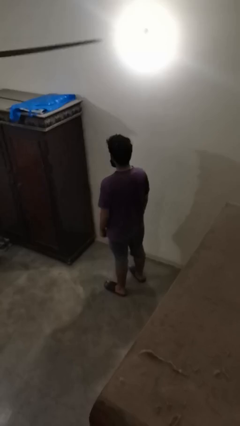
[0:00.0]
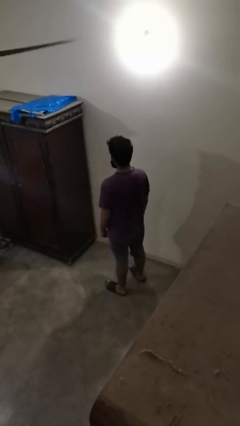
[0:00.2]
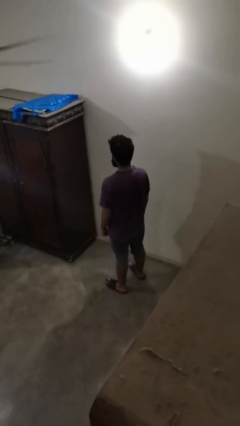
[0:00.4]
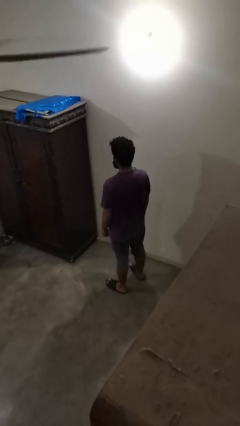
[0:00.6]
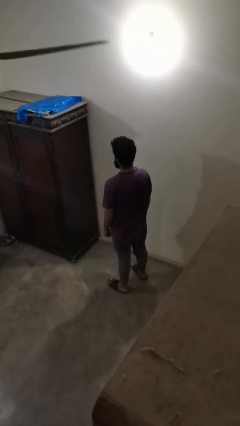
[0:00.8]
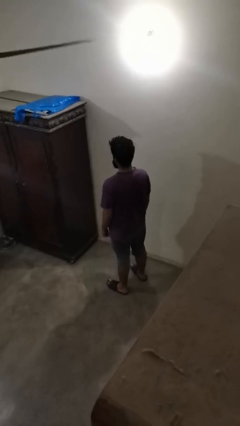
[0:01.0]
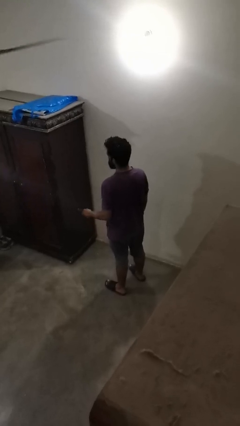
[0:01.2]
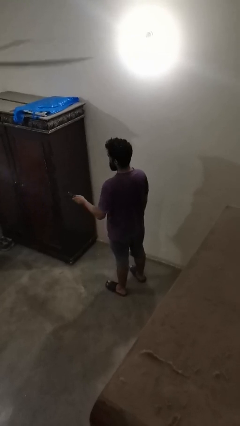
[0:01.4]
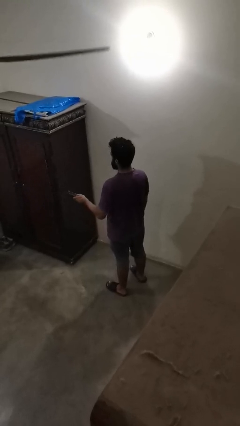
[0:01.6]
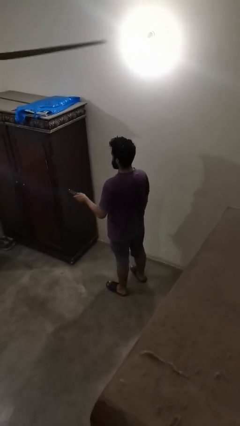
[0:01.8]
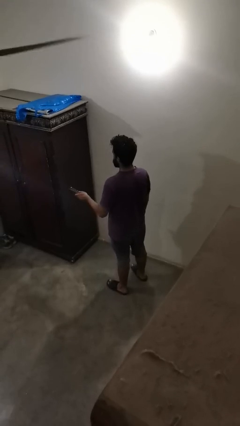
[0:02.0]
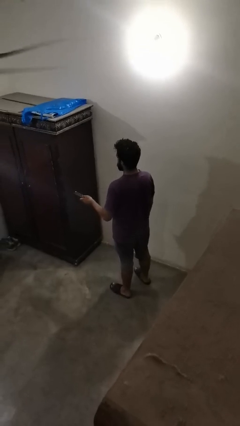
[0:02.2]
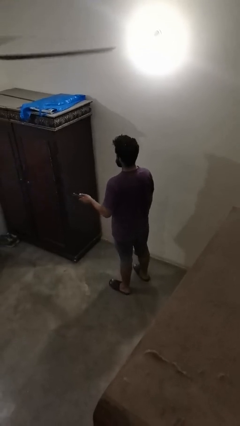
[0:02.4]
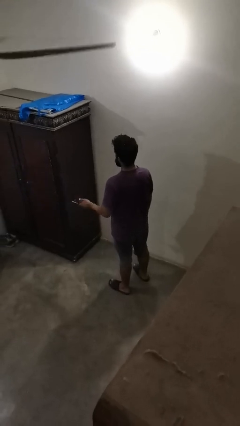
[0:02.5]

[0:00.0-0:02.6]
person uses television remote

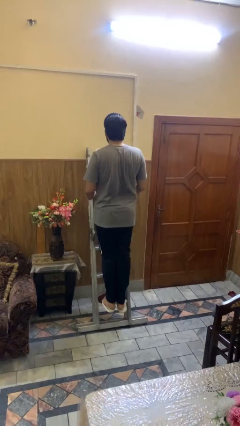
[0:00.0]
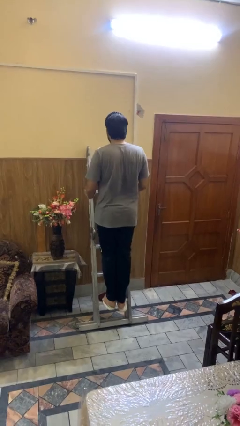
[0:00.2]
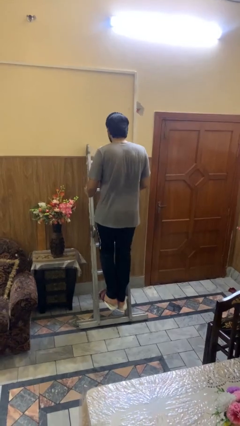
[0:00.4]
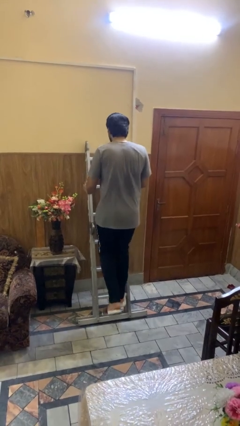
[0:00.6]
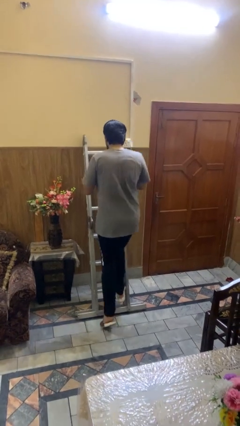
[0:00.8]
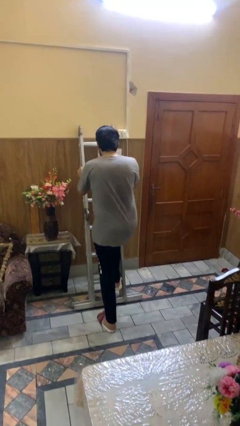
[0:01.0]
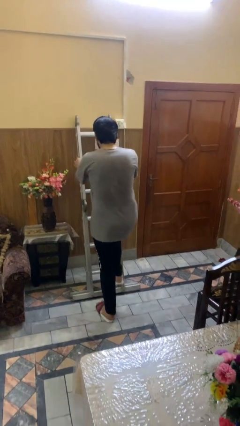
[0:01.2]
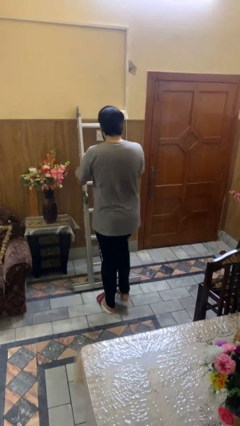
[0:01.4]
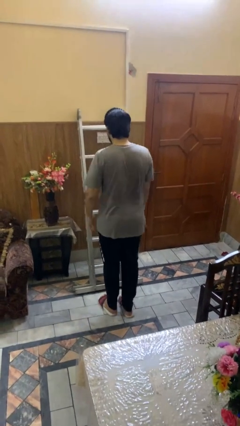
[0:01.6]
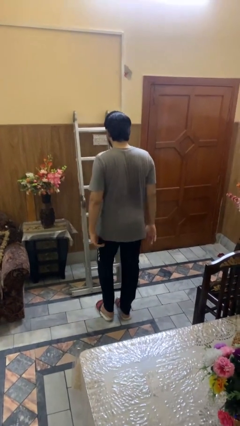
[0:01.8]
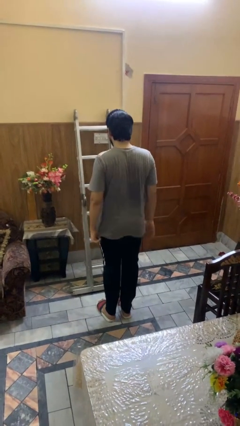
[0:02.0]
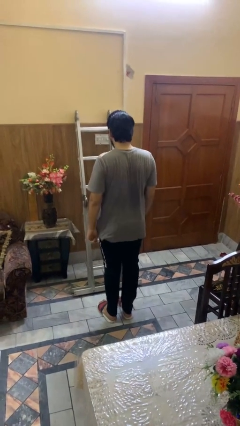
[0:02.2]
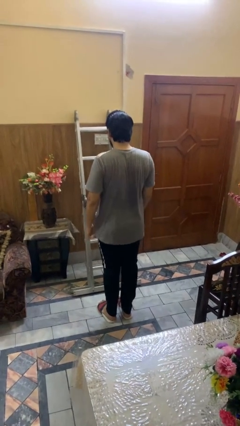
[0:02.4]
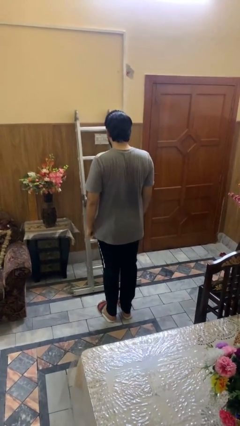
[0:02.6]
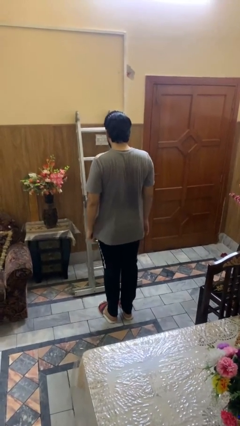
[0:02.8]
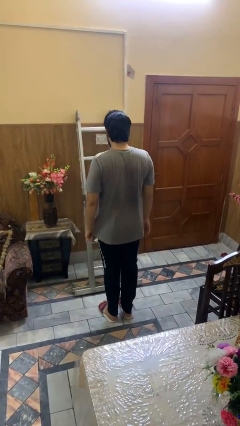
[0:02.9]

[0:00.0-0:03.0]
person climbs down ladder

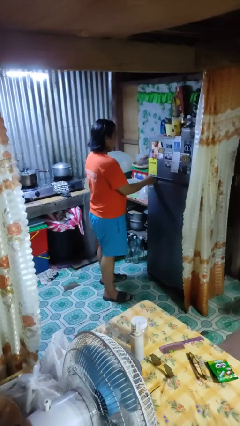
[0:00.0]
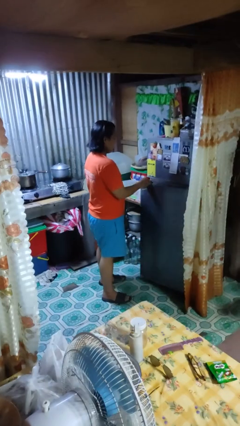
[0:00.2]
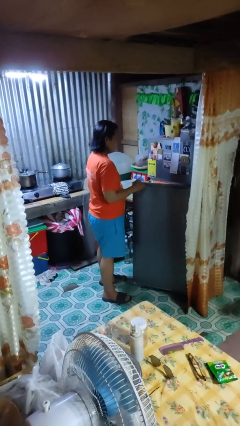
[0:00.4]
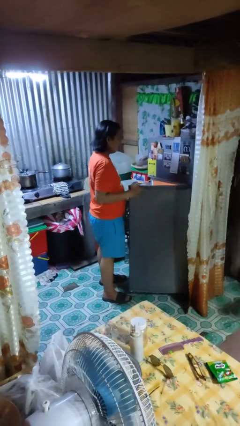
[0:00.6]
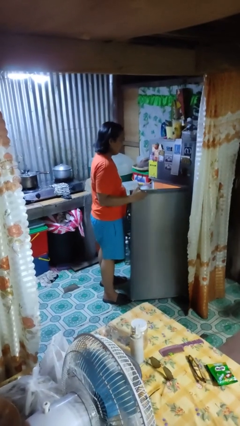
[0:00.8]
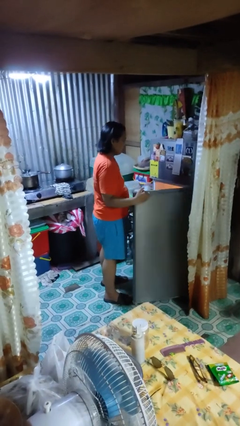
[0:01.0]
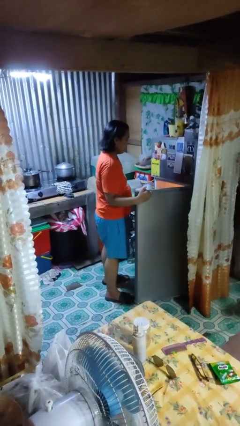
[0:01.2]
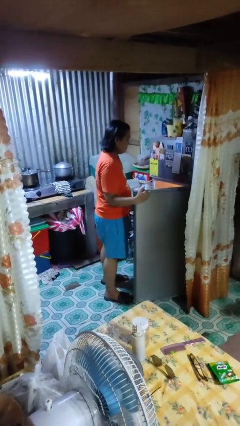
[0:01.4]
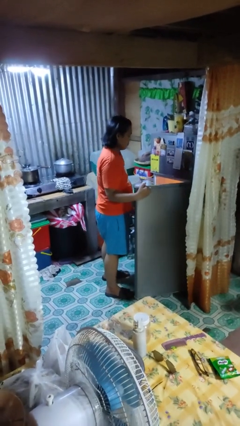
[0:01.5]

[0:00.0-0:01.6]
person opens refrigerator

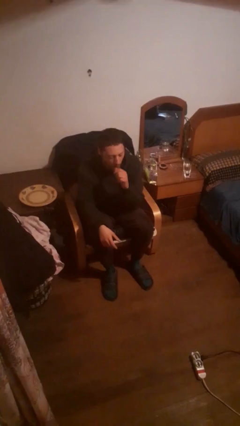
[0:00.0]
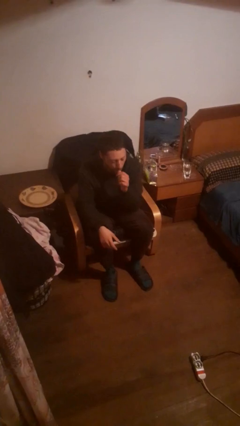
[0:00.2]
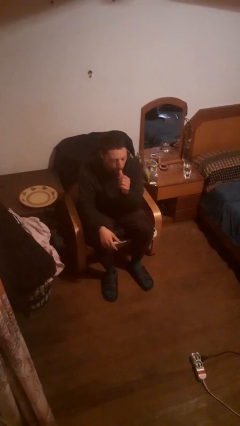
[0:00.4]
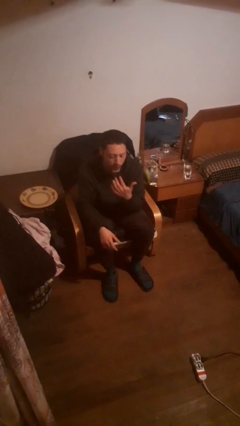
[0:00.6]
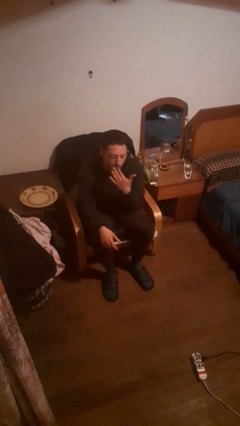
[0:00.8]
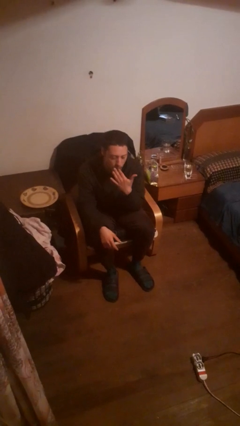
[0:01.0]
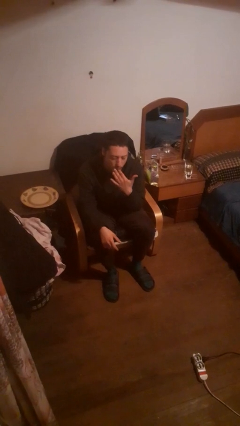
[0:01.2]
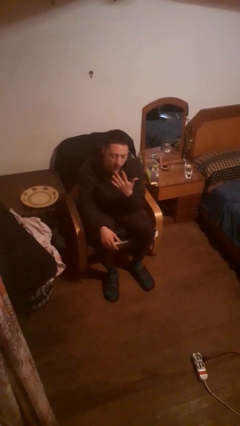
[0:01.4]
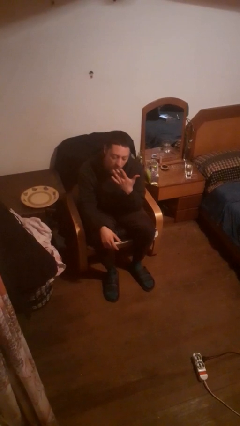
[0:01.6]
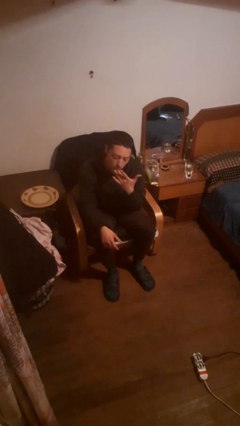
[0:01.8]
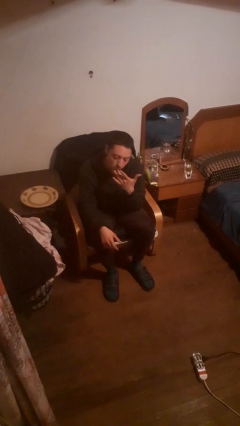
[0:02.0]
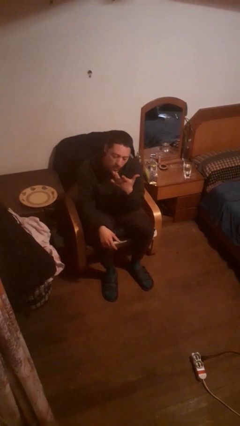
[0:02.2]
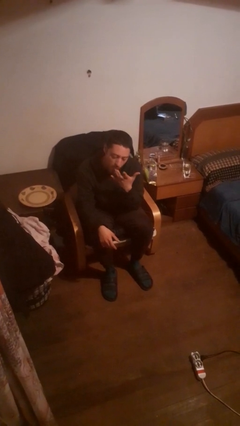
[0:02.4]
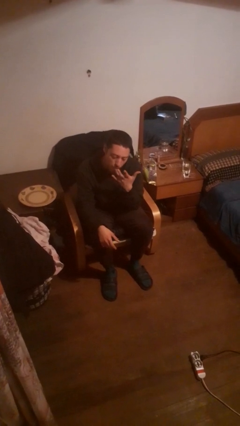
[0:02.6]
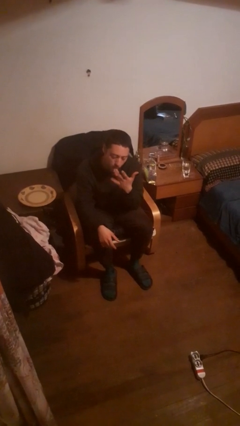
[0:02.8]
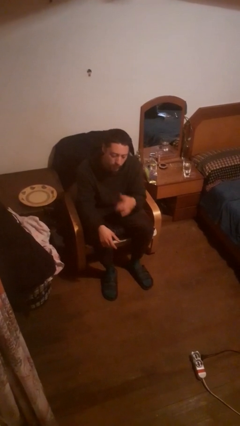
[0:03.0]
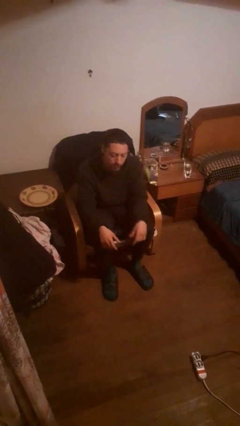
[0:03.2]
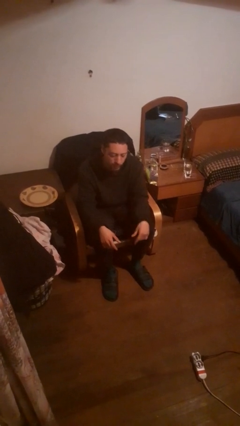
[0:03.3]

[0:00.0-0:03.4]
person licks fingers

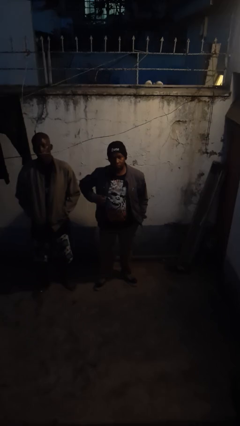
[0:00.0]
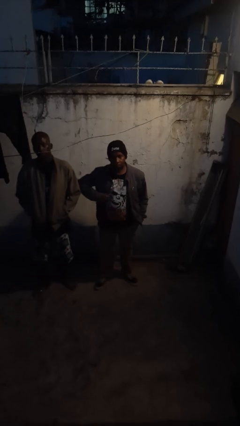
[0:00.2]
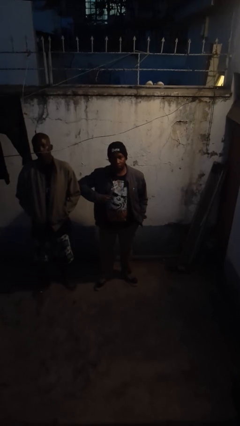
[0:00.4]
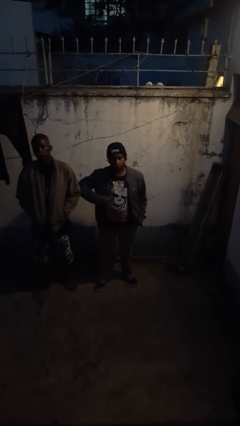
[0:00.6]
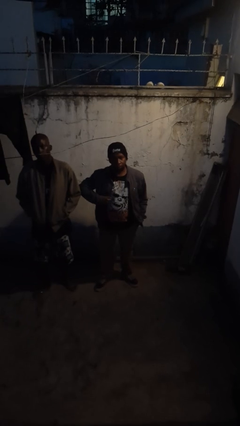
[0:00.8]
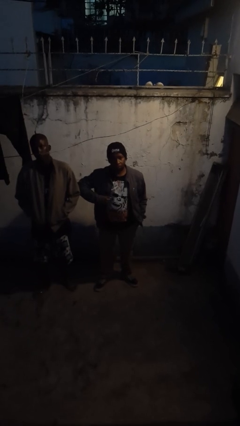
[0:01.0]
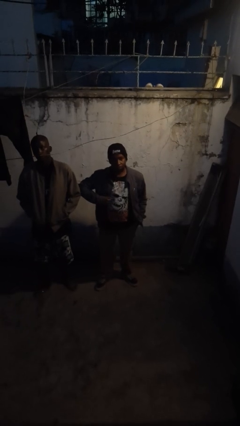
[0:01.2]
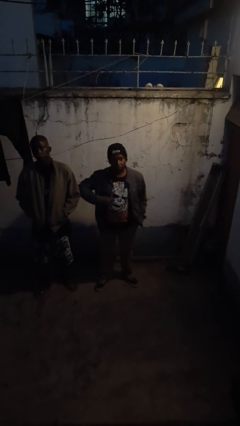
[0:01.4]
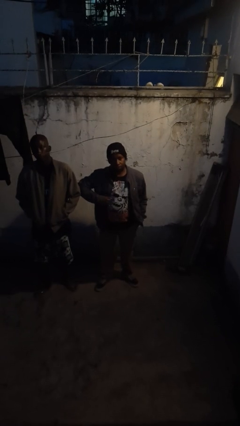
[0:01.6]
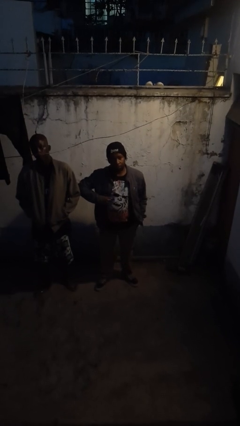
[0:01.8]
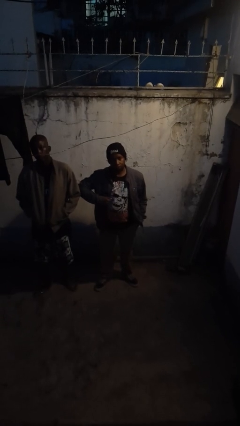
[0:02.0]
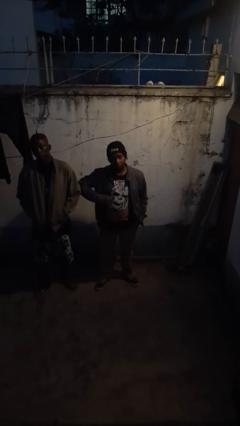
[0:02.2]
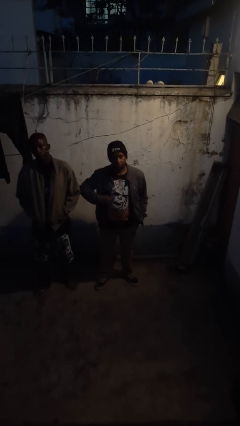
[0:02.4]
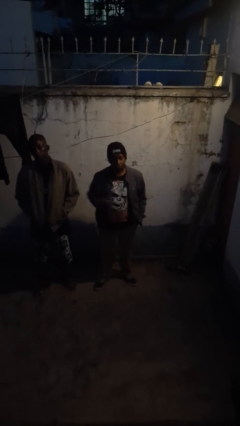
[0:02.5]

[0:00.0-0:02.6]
person nudges person with elbow

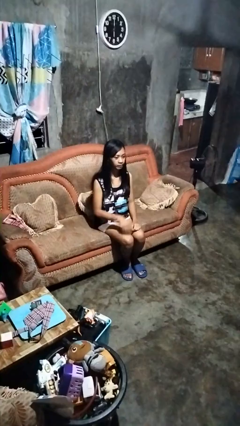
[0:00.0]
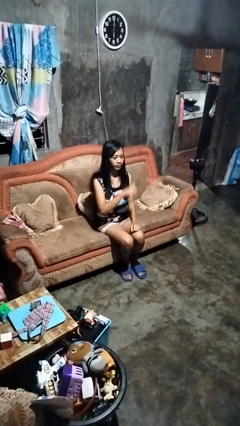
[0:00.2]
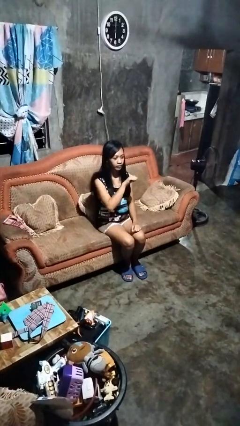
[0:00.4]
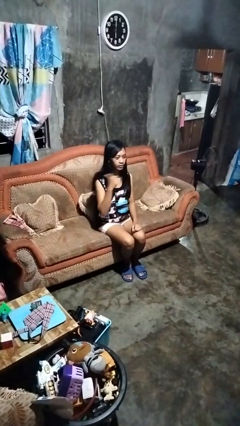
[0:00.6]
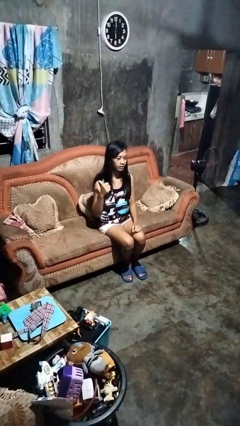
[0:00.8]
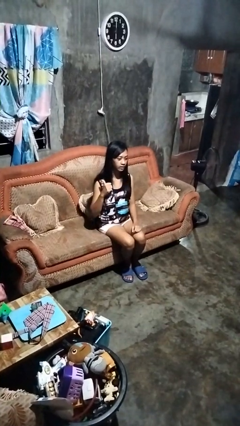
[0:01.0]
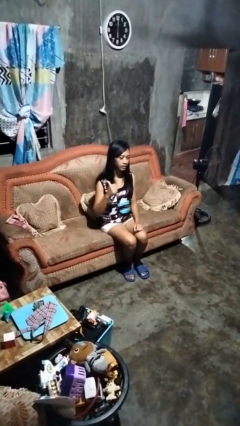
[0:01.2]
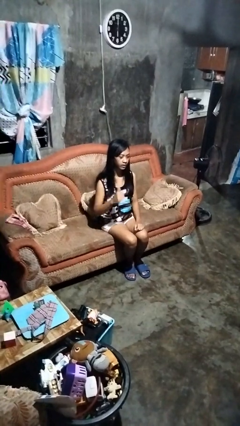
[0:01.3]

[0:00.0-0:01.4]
person gestures cut

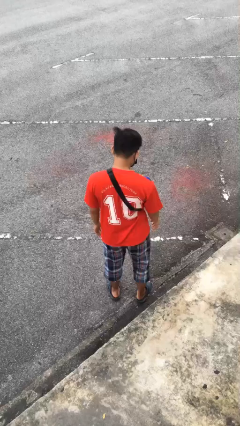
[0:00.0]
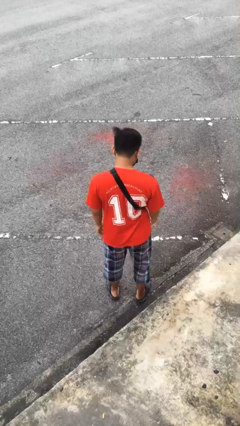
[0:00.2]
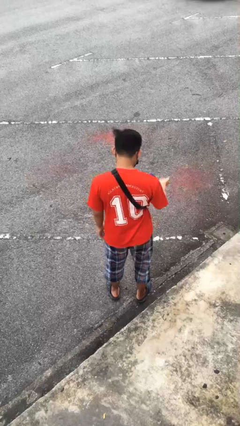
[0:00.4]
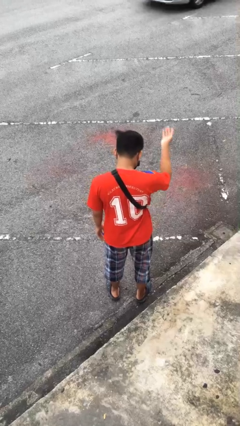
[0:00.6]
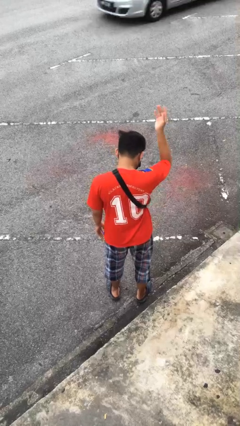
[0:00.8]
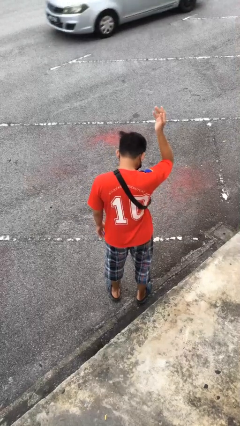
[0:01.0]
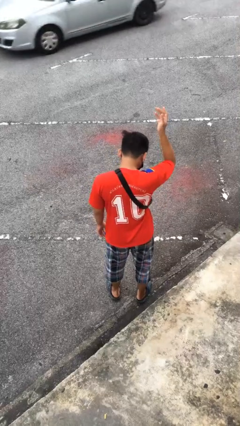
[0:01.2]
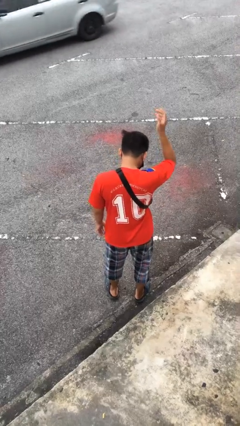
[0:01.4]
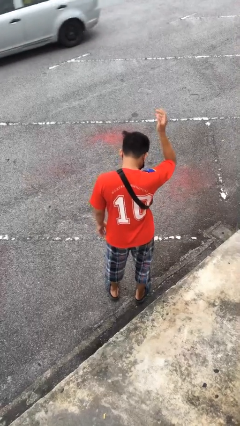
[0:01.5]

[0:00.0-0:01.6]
person gestures swipe up

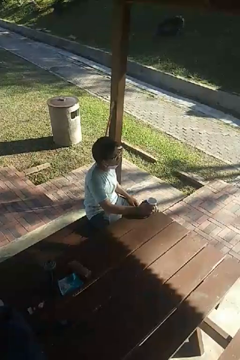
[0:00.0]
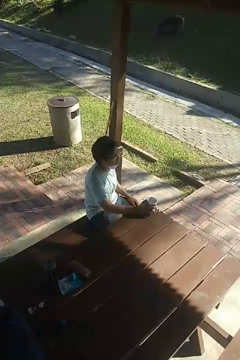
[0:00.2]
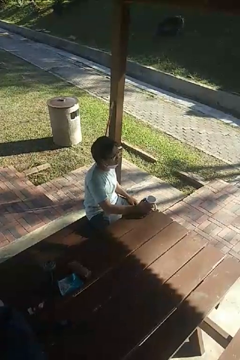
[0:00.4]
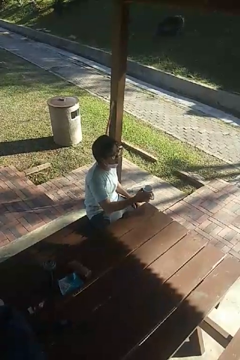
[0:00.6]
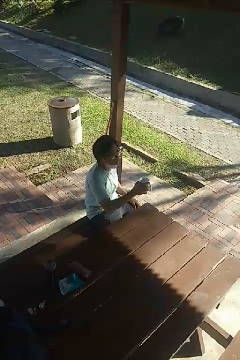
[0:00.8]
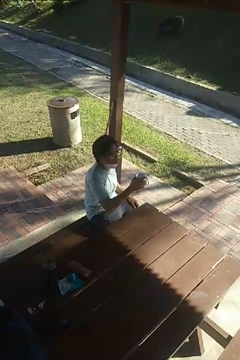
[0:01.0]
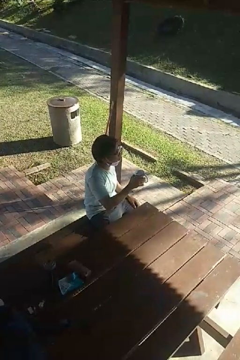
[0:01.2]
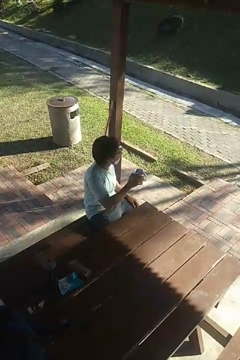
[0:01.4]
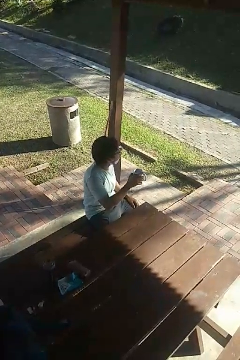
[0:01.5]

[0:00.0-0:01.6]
person picks up object from table
